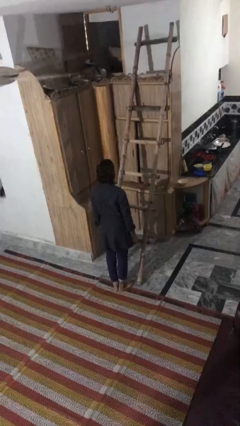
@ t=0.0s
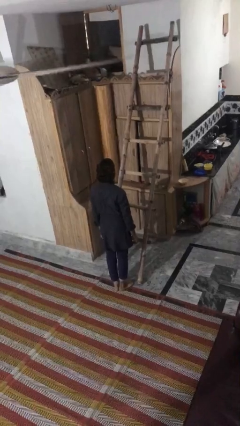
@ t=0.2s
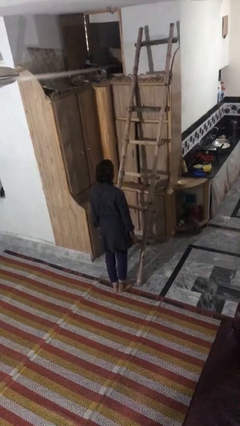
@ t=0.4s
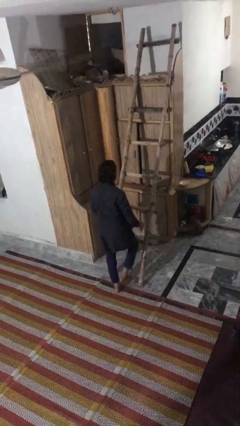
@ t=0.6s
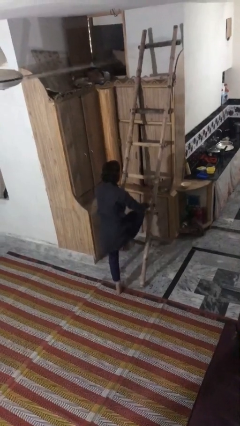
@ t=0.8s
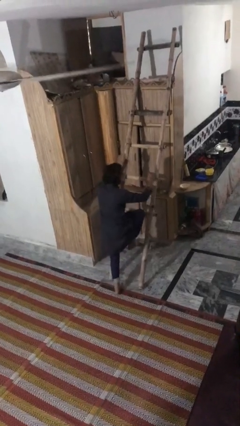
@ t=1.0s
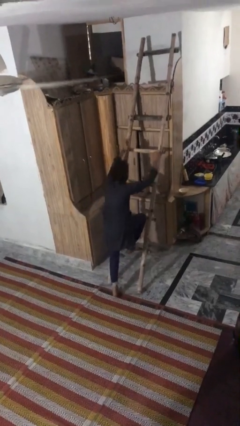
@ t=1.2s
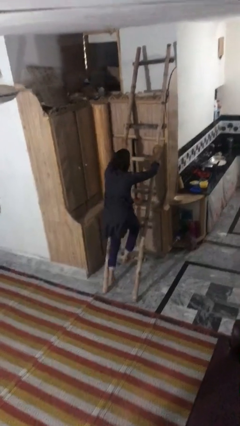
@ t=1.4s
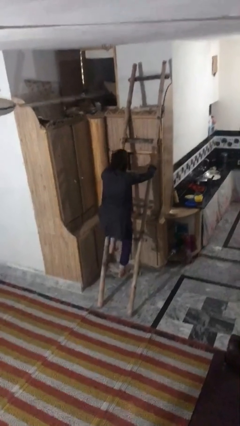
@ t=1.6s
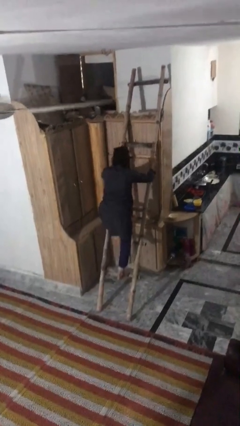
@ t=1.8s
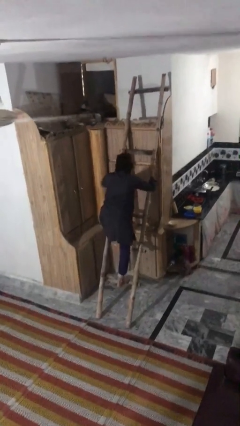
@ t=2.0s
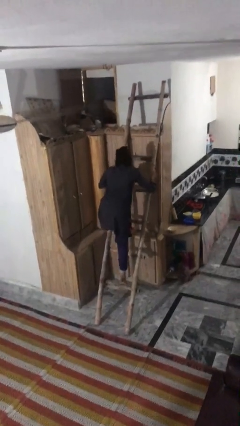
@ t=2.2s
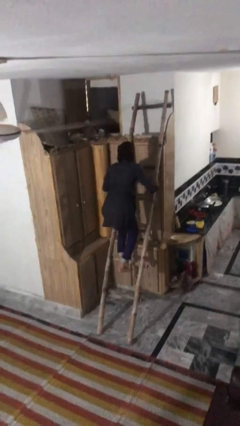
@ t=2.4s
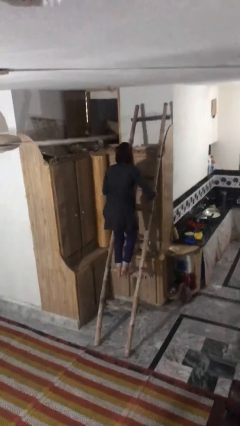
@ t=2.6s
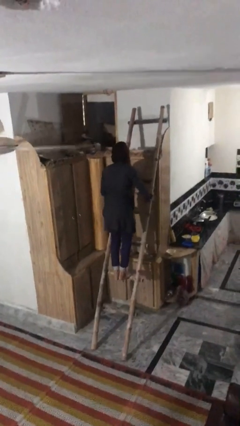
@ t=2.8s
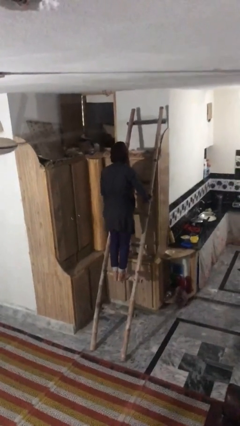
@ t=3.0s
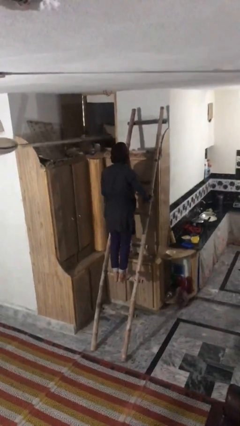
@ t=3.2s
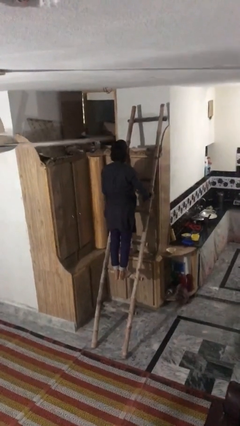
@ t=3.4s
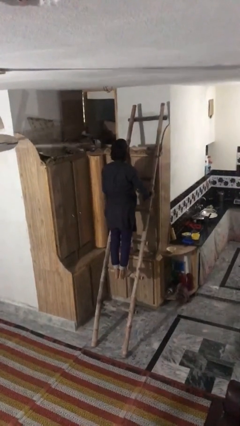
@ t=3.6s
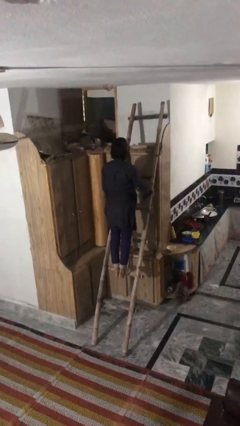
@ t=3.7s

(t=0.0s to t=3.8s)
person climbs up ladder

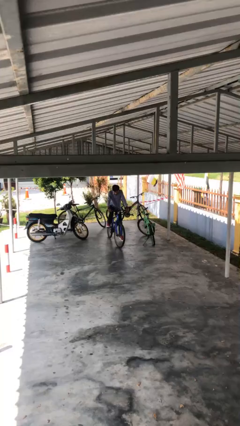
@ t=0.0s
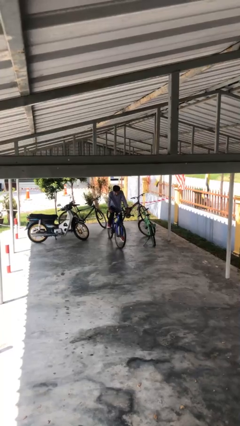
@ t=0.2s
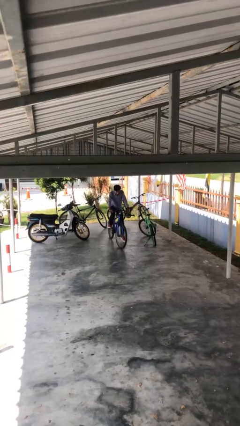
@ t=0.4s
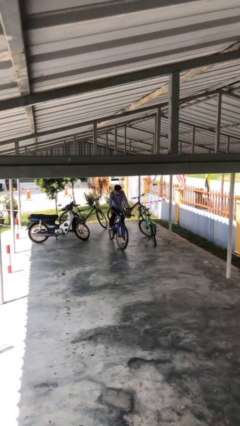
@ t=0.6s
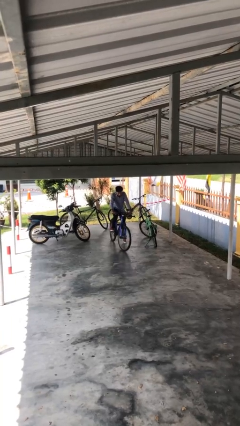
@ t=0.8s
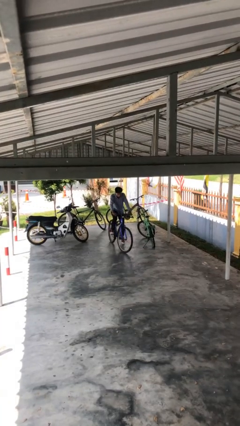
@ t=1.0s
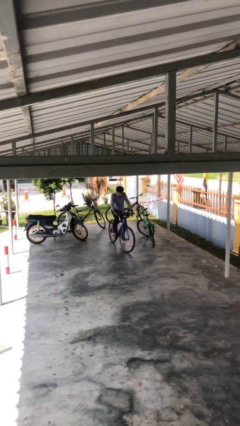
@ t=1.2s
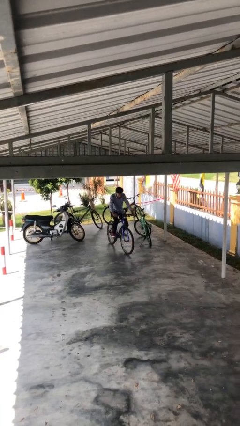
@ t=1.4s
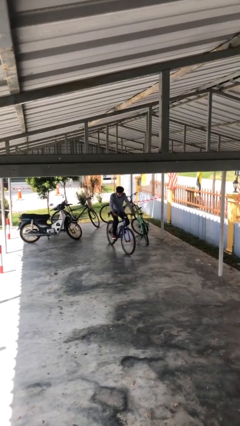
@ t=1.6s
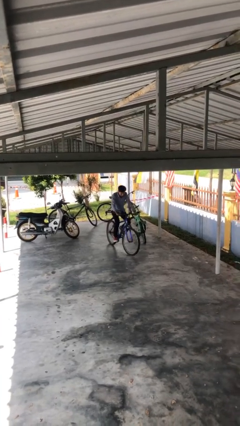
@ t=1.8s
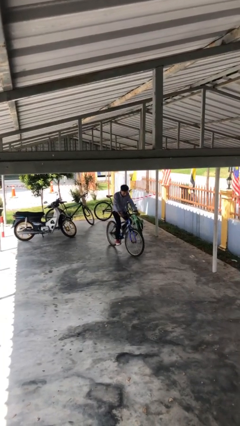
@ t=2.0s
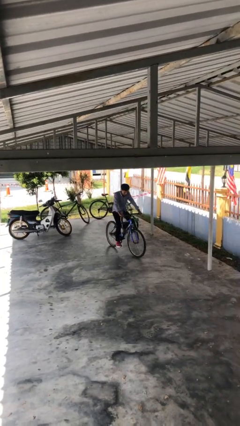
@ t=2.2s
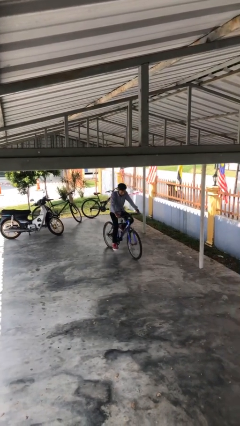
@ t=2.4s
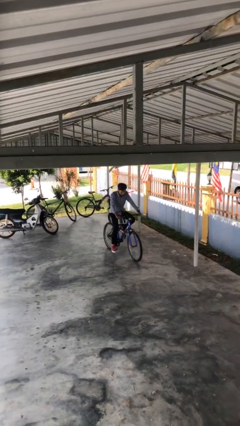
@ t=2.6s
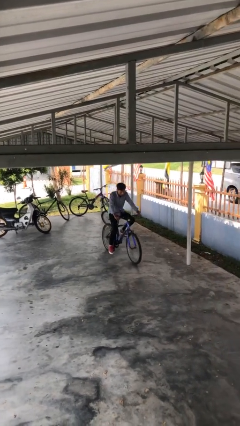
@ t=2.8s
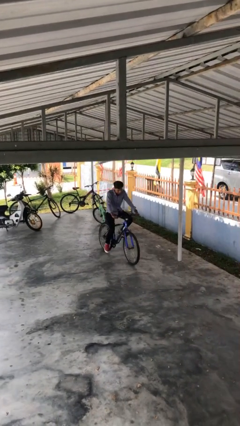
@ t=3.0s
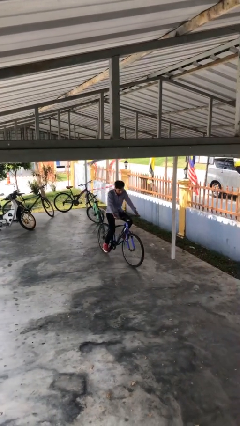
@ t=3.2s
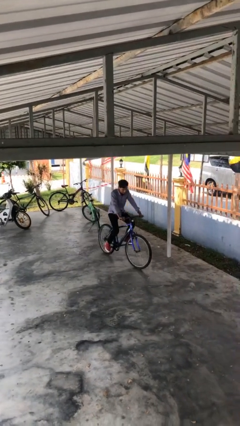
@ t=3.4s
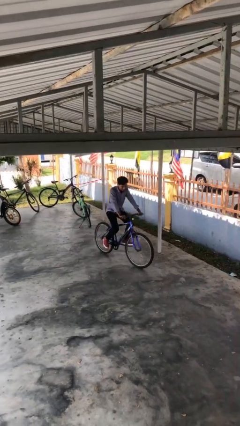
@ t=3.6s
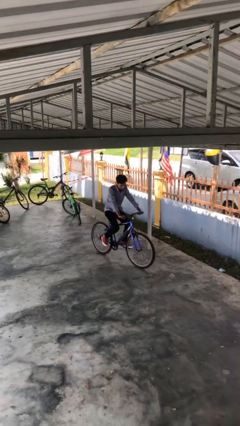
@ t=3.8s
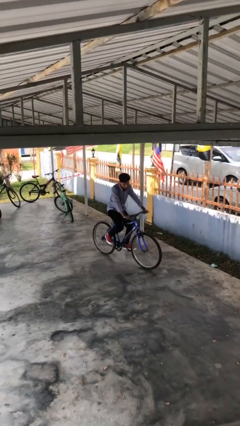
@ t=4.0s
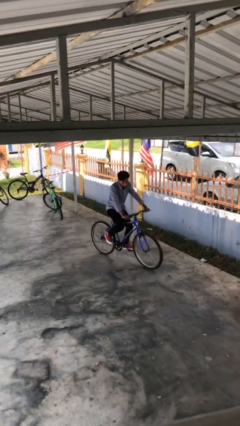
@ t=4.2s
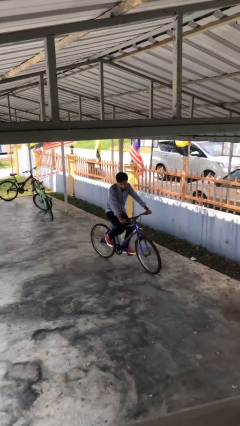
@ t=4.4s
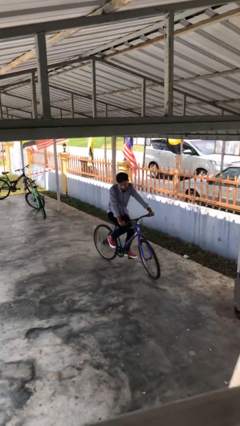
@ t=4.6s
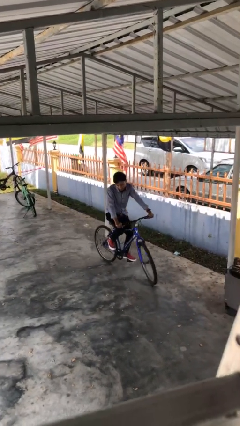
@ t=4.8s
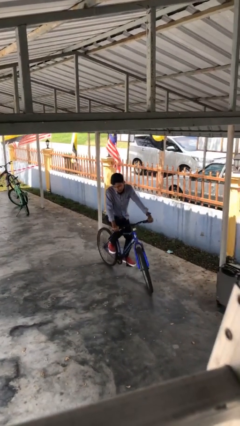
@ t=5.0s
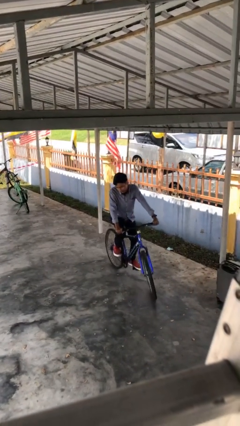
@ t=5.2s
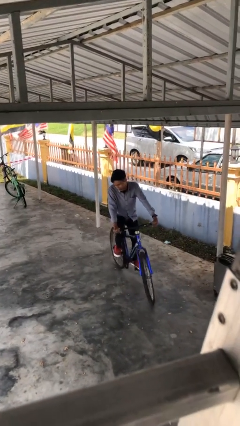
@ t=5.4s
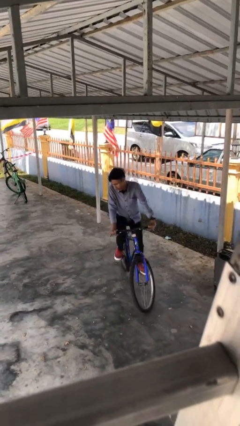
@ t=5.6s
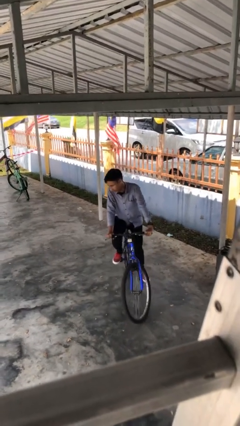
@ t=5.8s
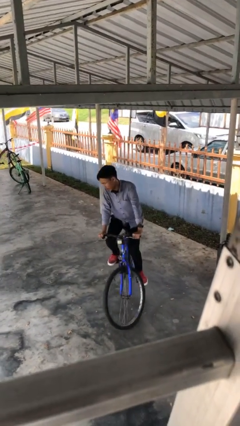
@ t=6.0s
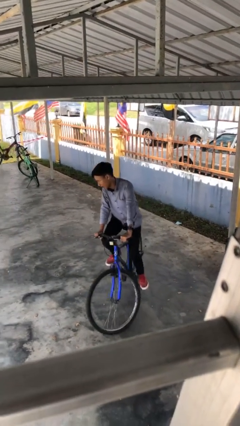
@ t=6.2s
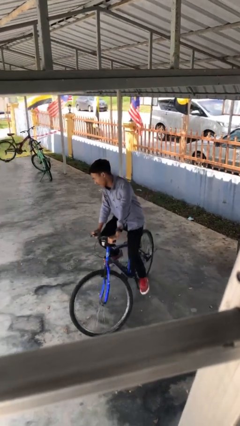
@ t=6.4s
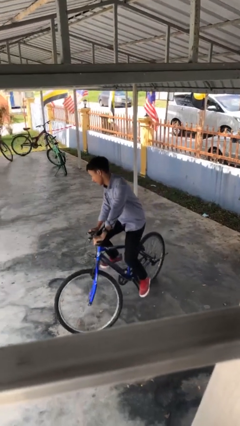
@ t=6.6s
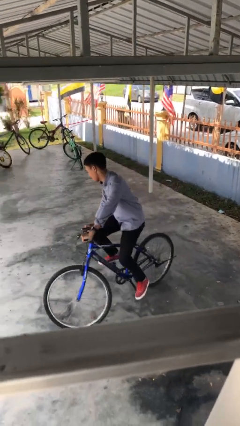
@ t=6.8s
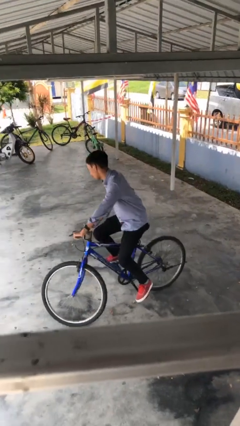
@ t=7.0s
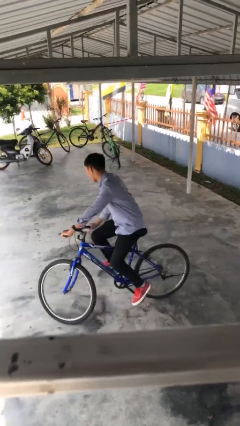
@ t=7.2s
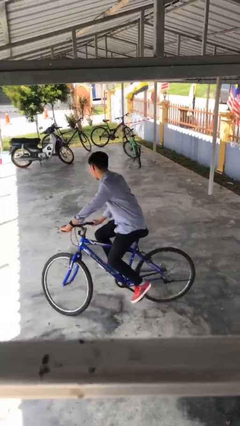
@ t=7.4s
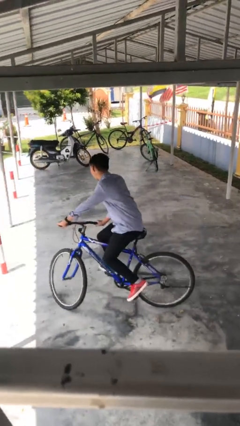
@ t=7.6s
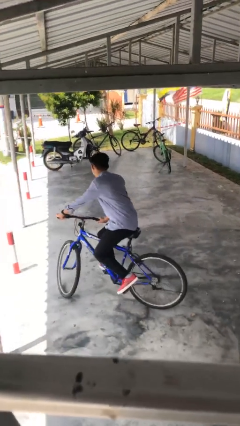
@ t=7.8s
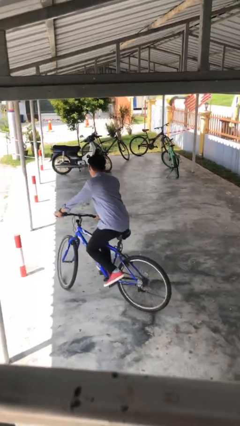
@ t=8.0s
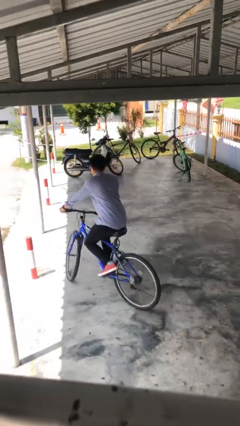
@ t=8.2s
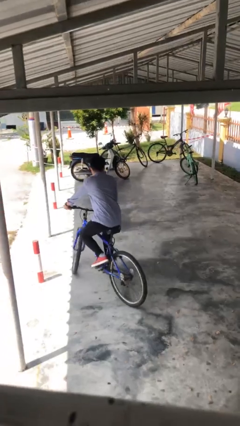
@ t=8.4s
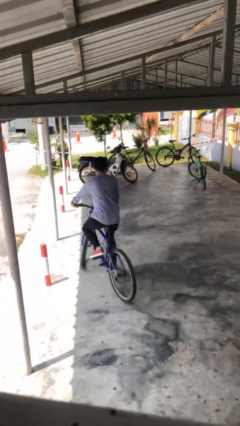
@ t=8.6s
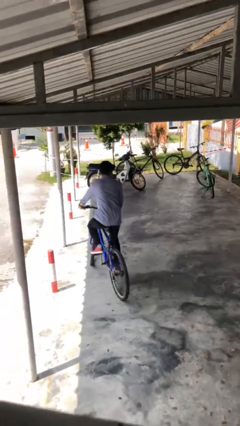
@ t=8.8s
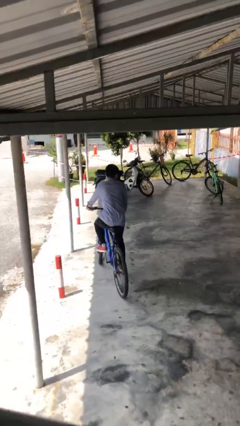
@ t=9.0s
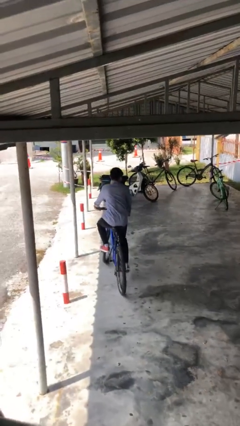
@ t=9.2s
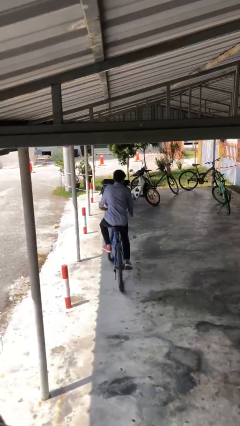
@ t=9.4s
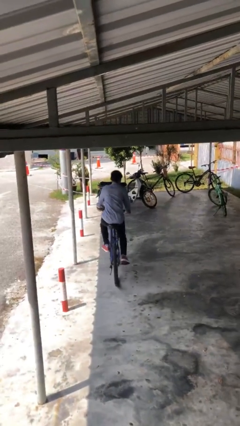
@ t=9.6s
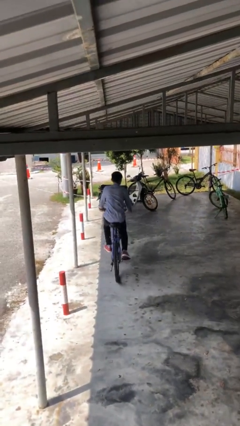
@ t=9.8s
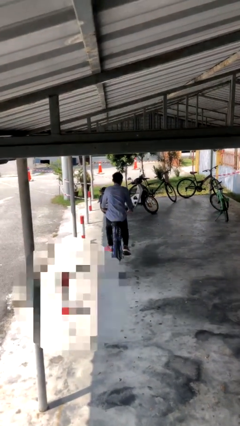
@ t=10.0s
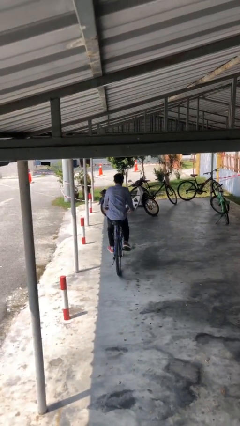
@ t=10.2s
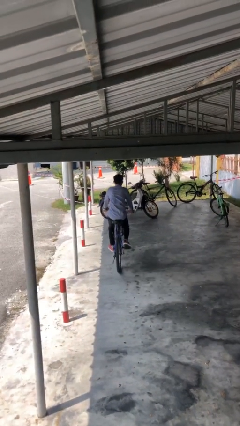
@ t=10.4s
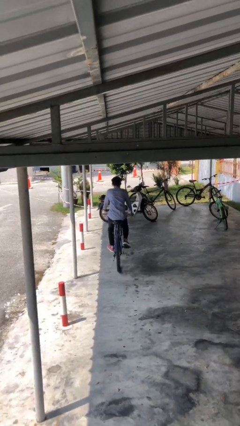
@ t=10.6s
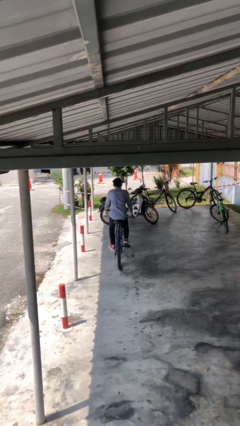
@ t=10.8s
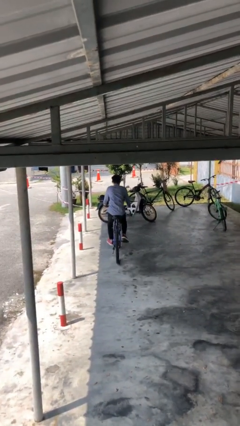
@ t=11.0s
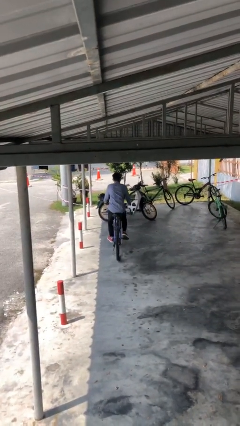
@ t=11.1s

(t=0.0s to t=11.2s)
person rides bicycle

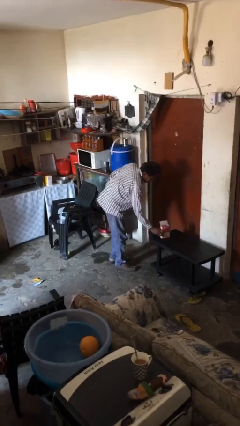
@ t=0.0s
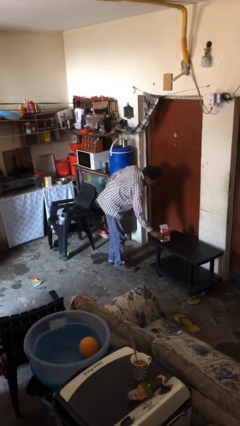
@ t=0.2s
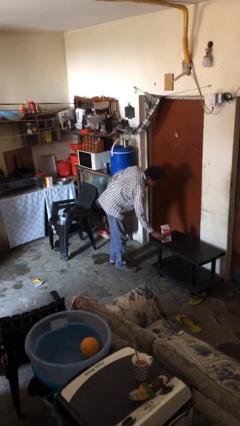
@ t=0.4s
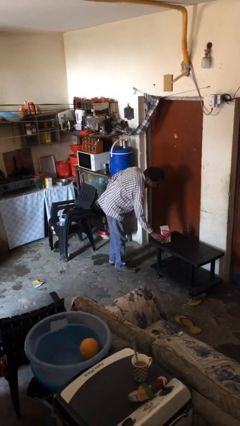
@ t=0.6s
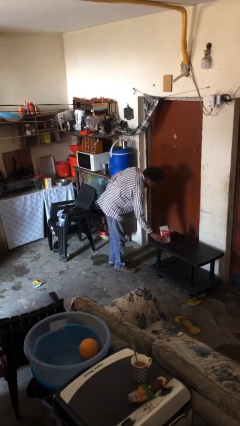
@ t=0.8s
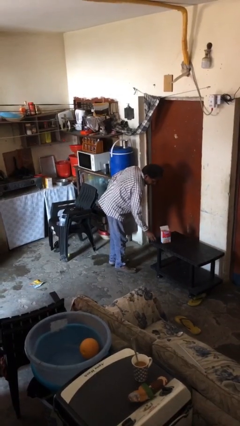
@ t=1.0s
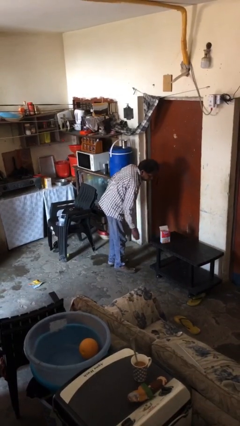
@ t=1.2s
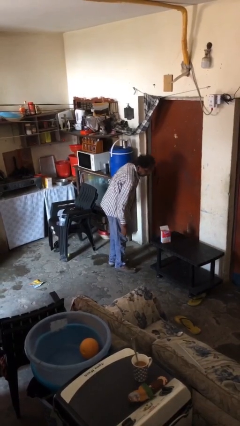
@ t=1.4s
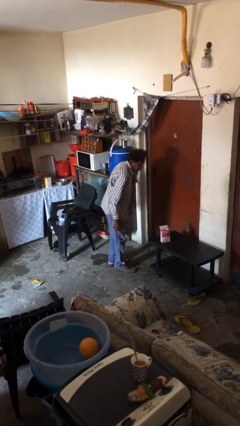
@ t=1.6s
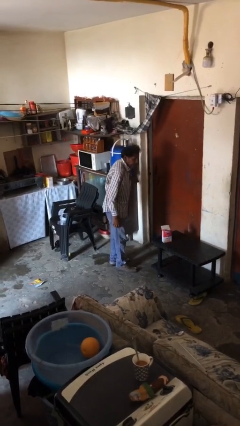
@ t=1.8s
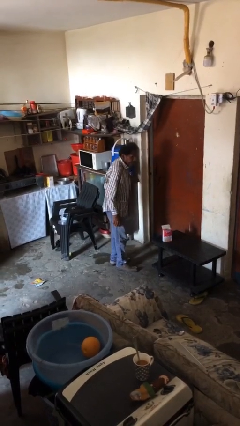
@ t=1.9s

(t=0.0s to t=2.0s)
person puts down object on table

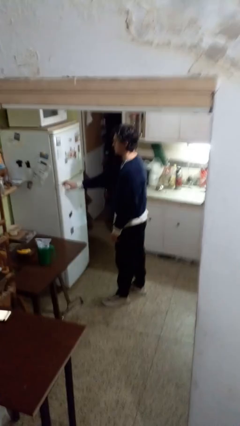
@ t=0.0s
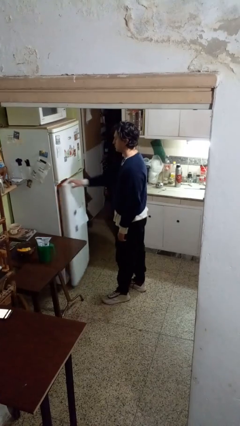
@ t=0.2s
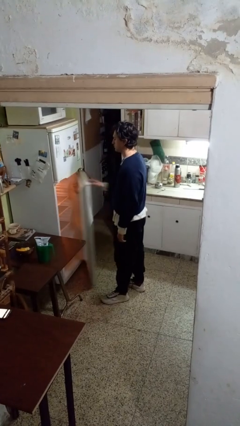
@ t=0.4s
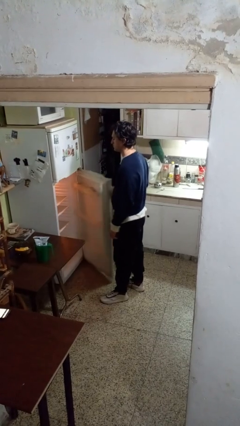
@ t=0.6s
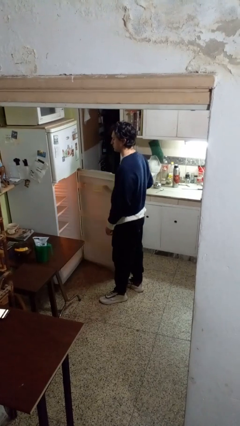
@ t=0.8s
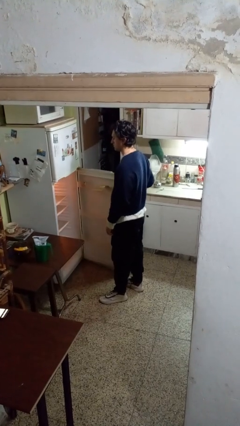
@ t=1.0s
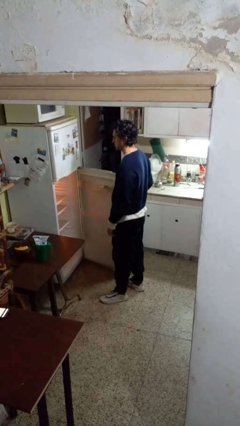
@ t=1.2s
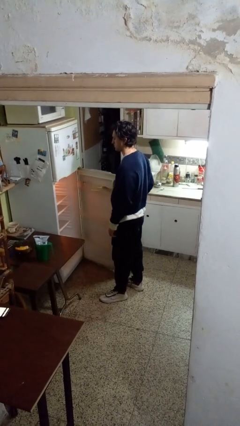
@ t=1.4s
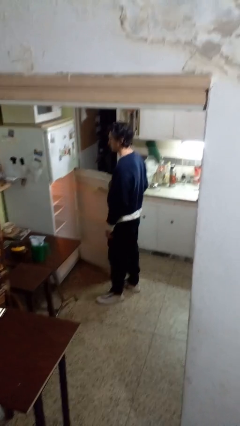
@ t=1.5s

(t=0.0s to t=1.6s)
person opens refrigerator
